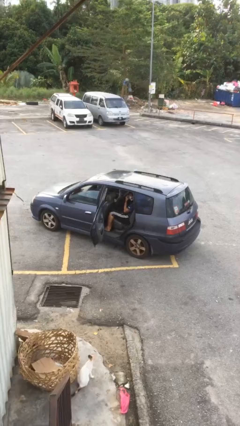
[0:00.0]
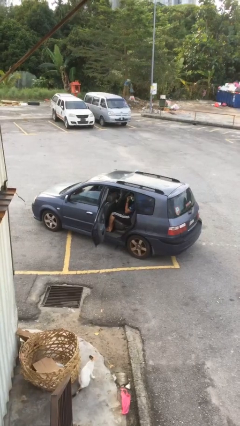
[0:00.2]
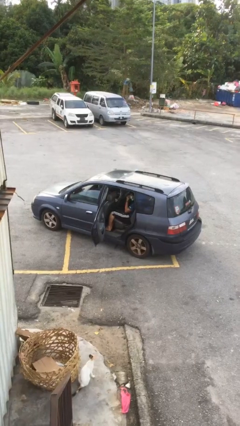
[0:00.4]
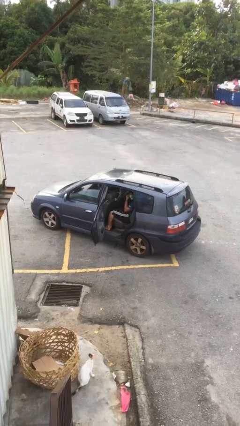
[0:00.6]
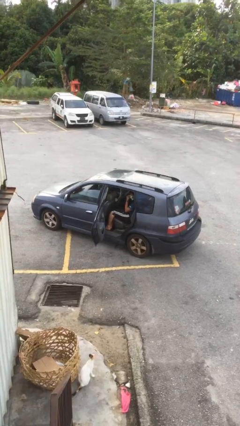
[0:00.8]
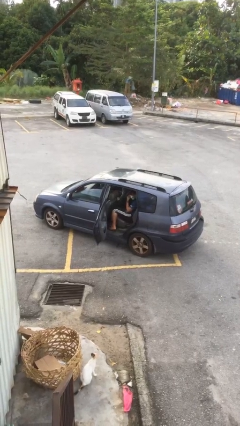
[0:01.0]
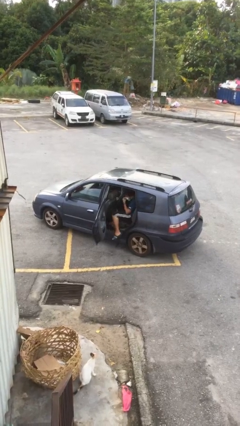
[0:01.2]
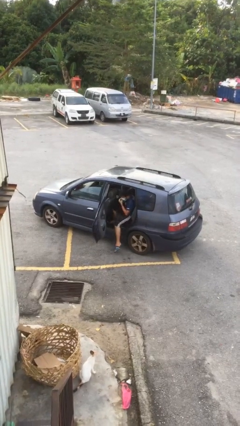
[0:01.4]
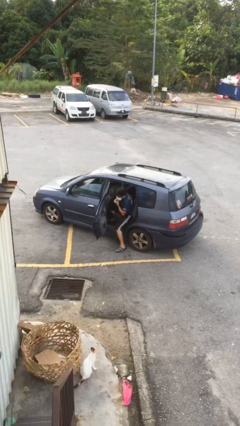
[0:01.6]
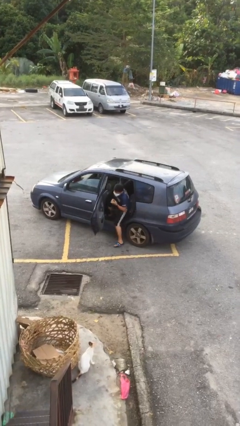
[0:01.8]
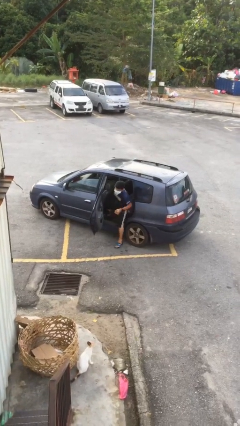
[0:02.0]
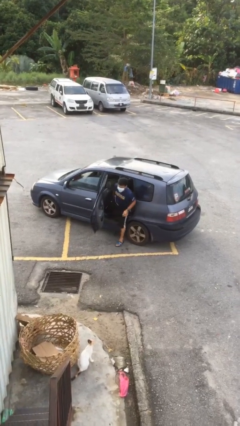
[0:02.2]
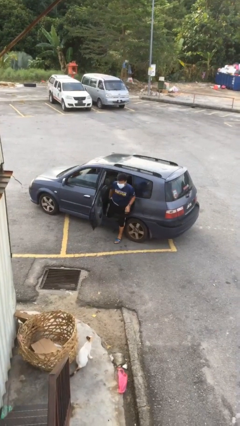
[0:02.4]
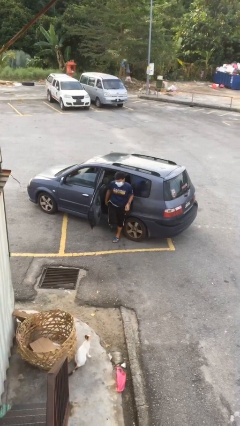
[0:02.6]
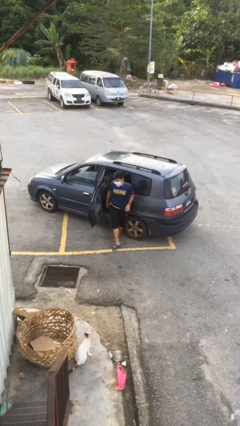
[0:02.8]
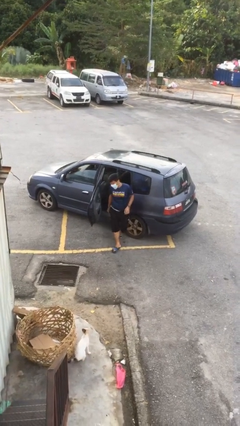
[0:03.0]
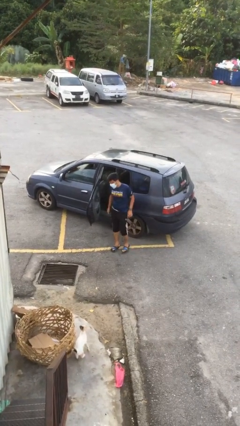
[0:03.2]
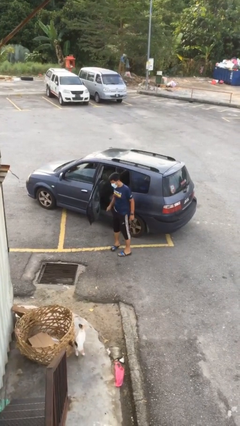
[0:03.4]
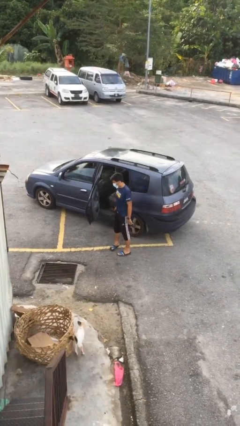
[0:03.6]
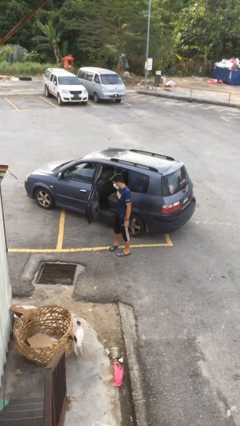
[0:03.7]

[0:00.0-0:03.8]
person exits car

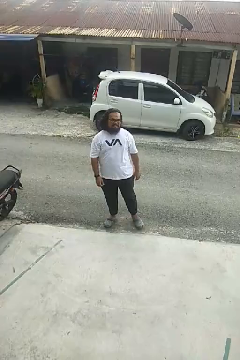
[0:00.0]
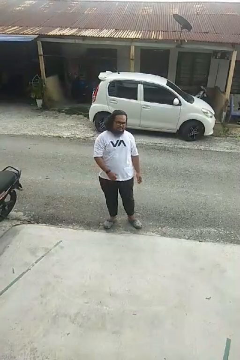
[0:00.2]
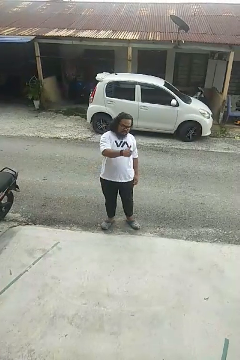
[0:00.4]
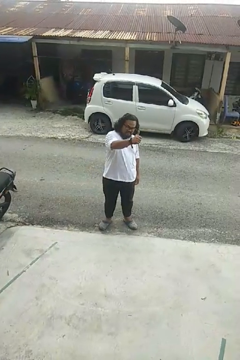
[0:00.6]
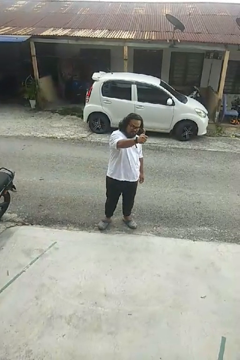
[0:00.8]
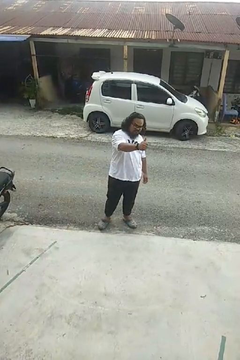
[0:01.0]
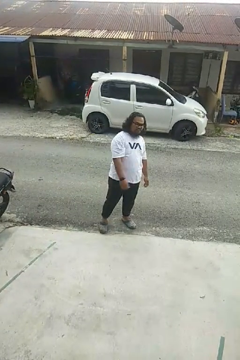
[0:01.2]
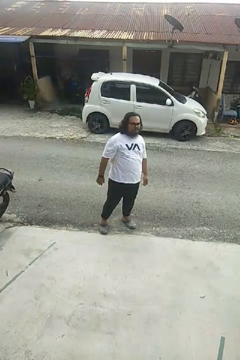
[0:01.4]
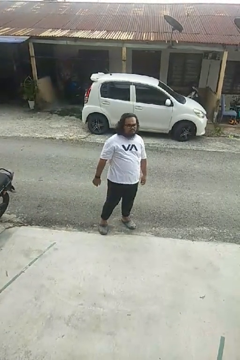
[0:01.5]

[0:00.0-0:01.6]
person gestures thumbs up

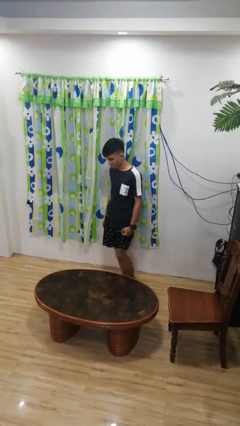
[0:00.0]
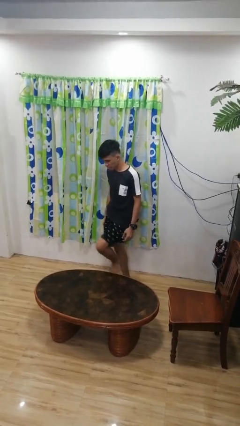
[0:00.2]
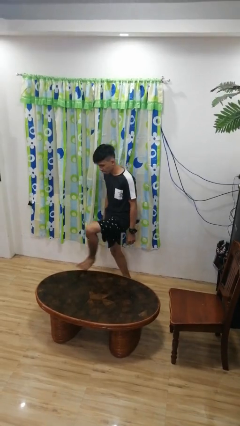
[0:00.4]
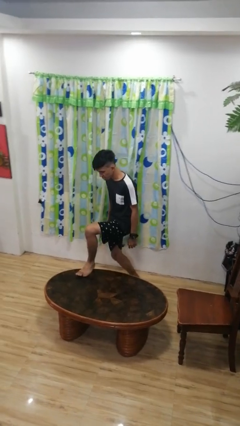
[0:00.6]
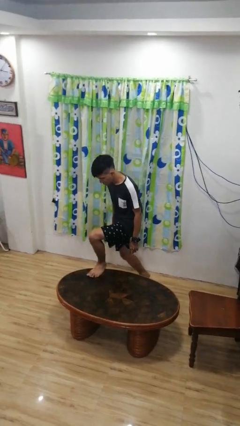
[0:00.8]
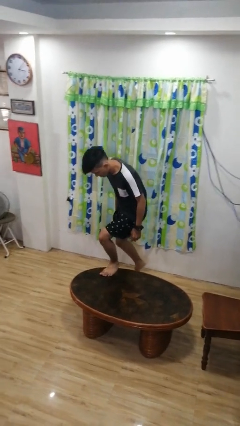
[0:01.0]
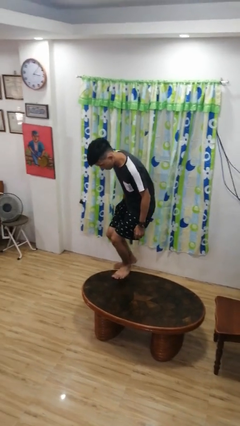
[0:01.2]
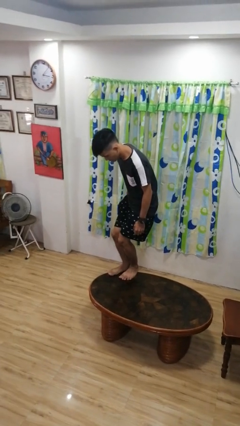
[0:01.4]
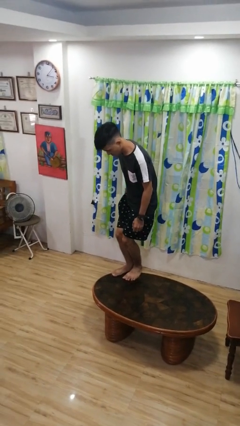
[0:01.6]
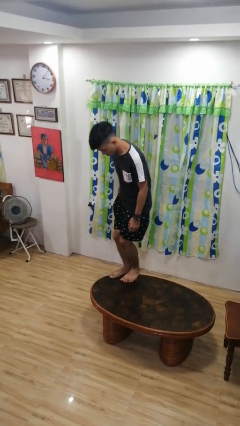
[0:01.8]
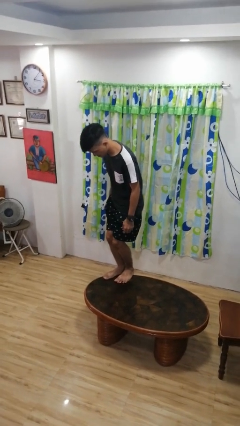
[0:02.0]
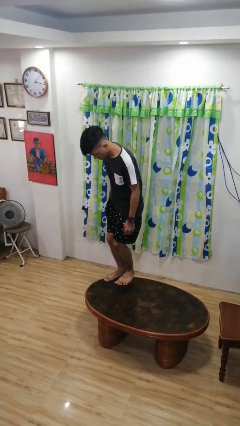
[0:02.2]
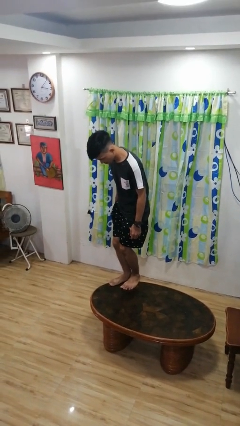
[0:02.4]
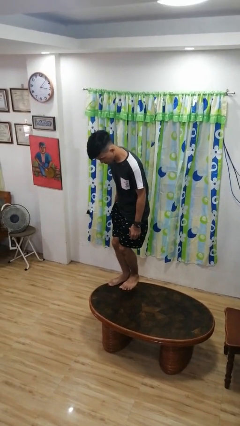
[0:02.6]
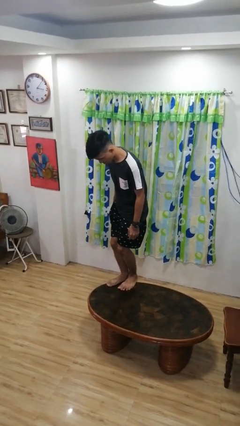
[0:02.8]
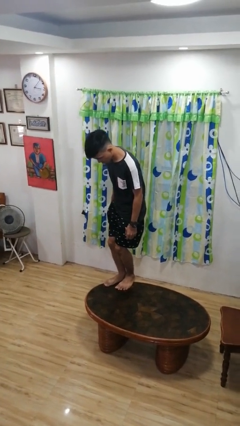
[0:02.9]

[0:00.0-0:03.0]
person climbs on table

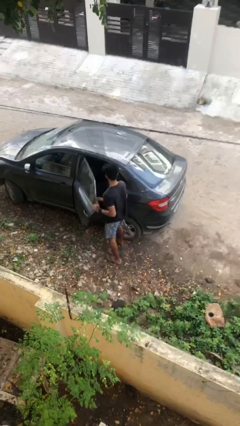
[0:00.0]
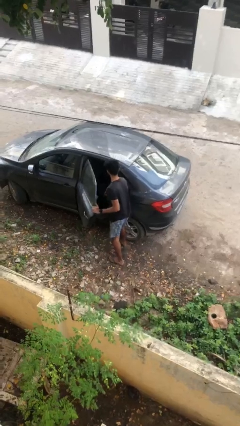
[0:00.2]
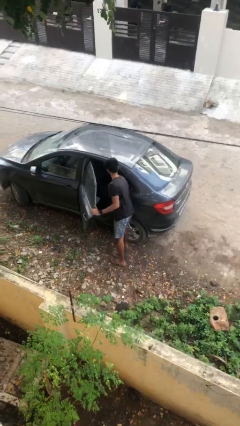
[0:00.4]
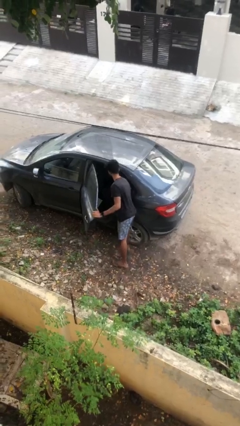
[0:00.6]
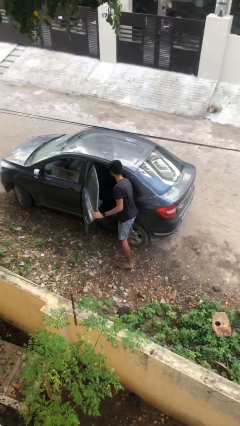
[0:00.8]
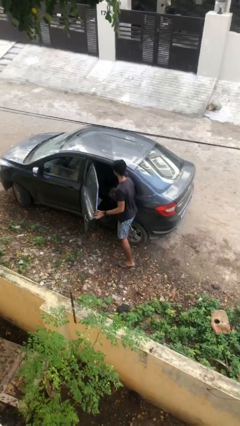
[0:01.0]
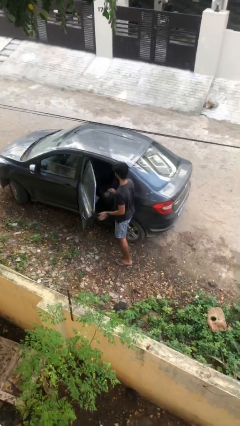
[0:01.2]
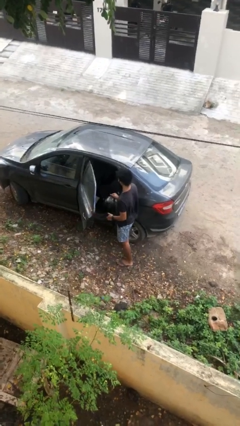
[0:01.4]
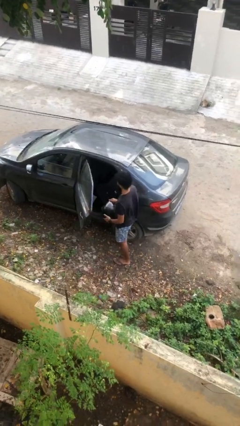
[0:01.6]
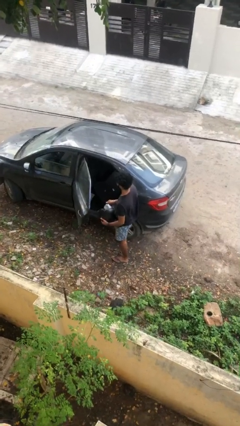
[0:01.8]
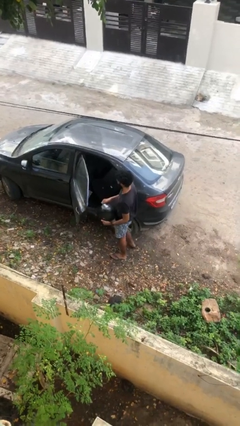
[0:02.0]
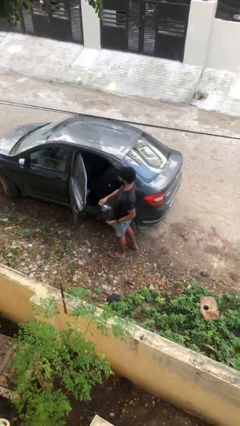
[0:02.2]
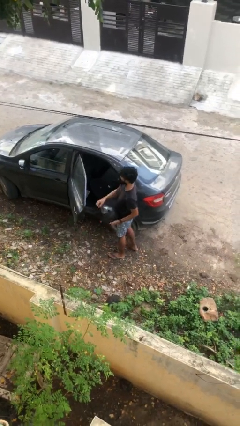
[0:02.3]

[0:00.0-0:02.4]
person unloads car

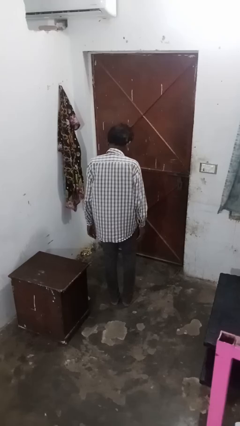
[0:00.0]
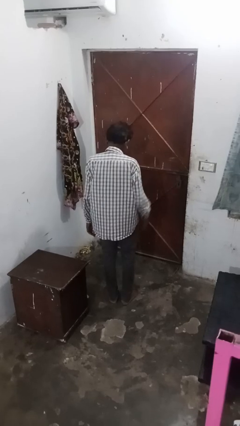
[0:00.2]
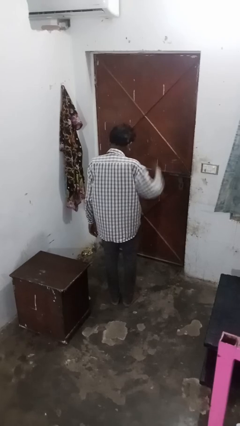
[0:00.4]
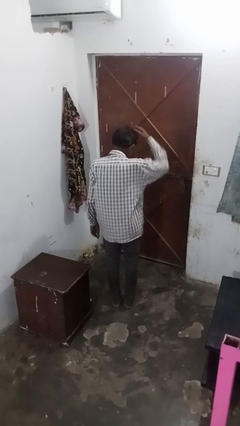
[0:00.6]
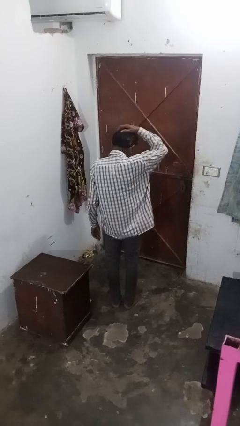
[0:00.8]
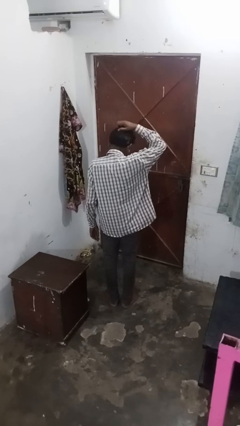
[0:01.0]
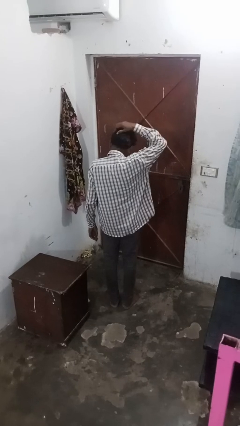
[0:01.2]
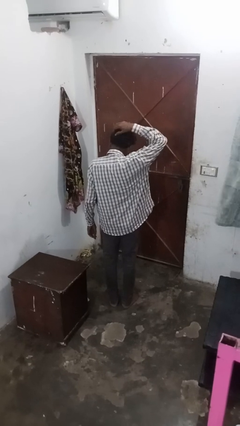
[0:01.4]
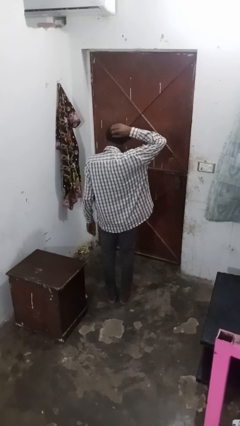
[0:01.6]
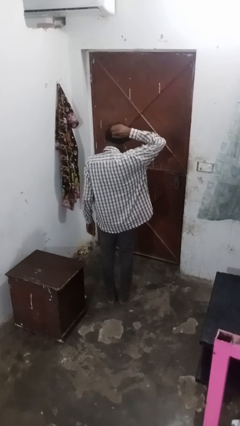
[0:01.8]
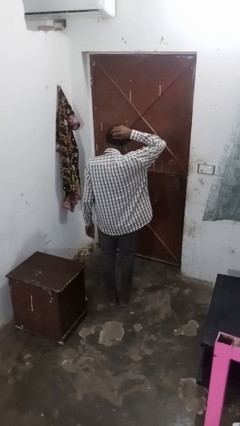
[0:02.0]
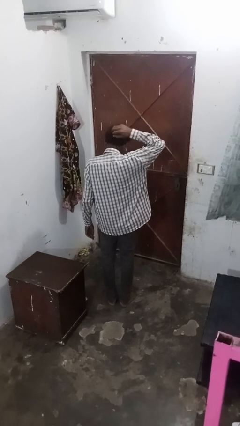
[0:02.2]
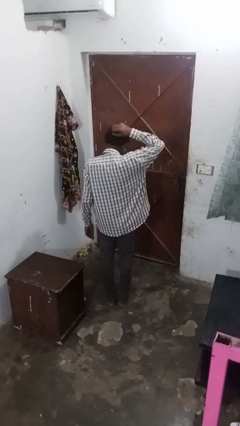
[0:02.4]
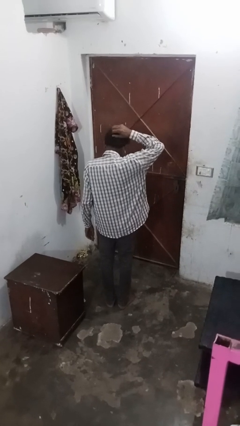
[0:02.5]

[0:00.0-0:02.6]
person strokes hair

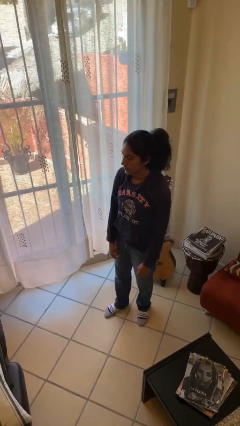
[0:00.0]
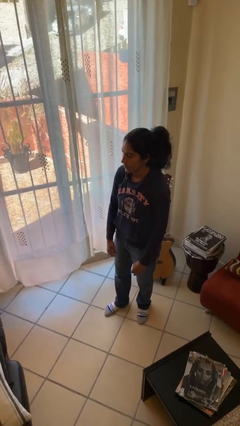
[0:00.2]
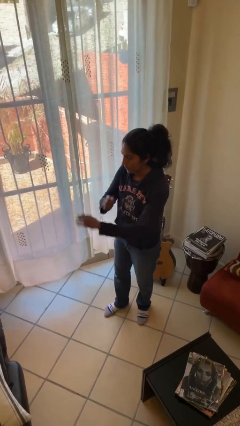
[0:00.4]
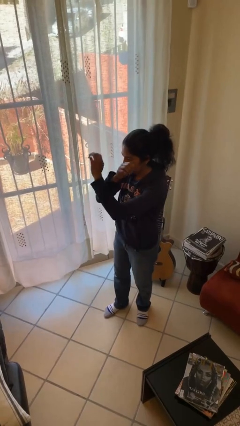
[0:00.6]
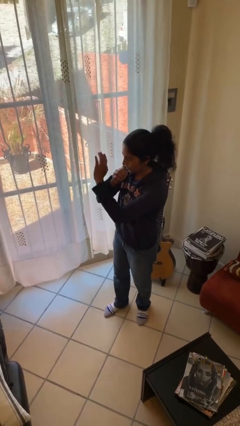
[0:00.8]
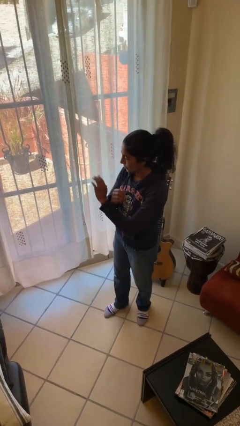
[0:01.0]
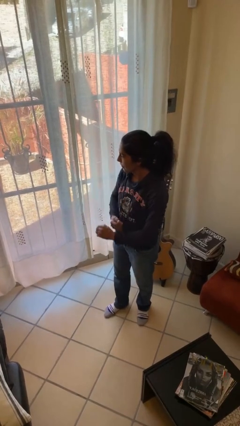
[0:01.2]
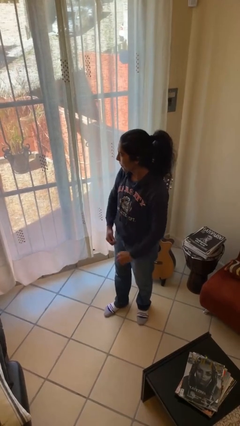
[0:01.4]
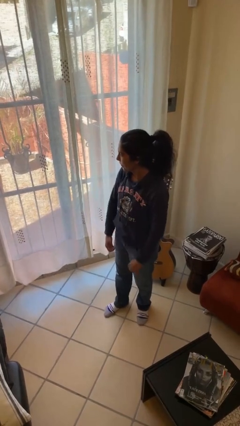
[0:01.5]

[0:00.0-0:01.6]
person gestures arms x

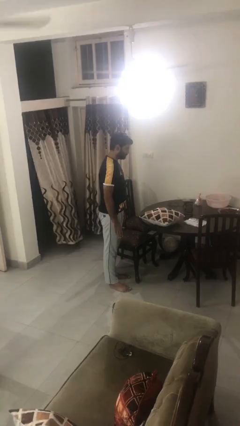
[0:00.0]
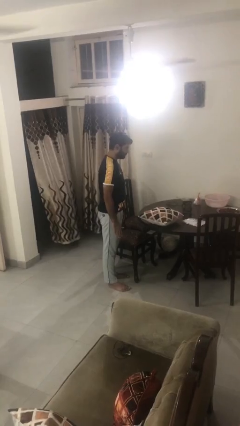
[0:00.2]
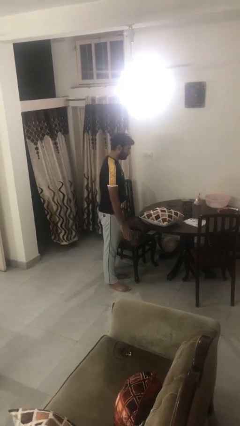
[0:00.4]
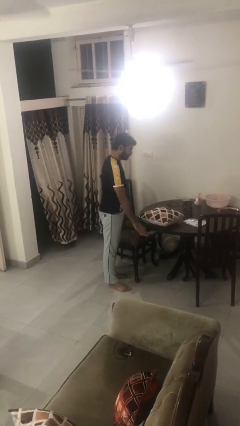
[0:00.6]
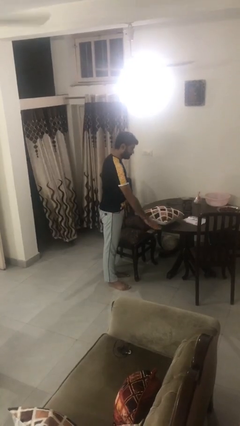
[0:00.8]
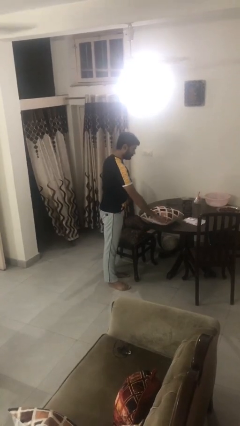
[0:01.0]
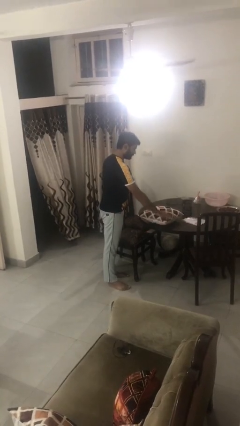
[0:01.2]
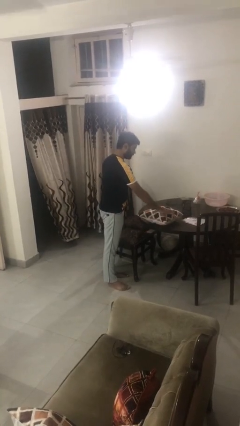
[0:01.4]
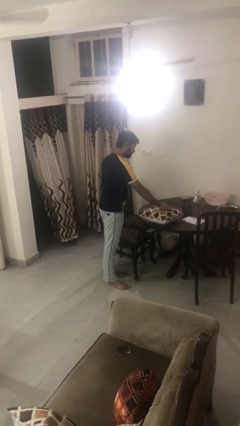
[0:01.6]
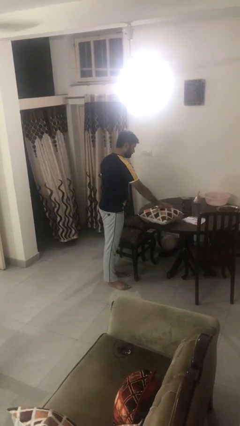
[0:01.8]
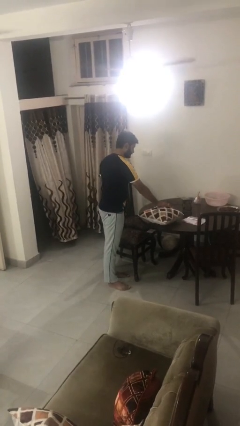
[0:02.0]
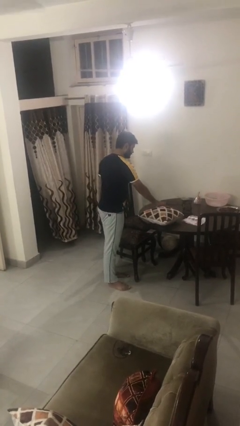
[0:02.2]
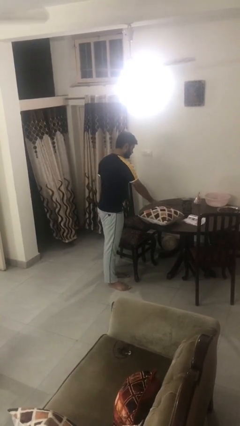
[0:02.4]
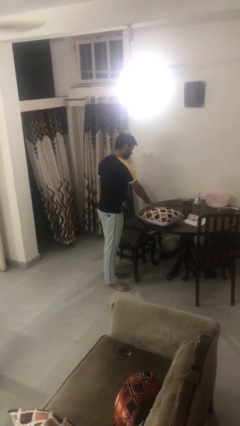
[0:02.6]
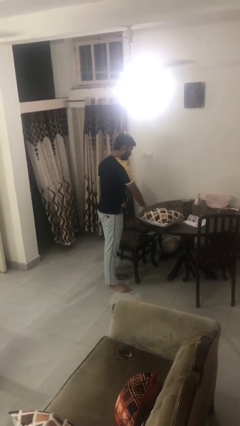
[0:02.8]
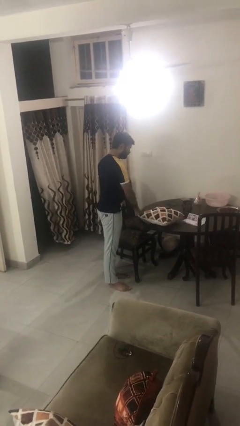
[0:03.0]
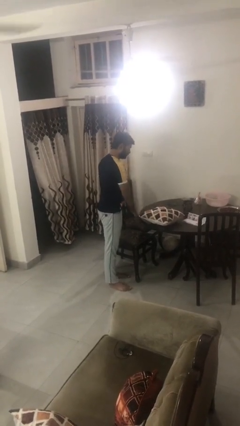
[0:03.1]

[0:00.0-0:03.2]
person waves hand over object
